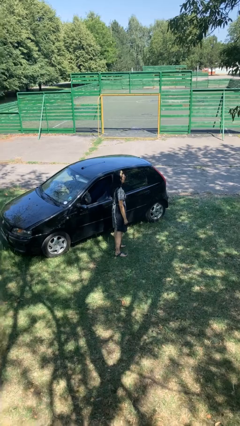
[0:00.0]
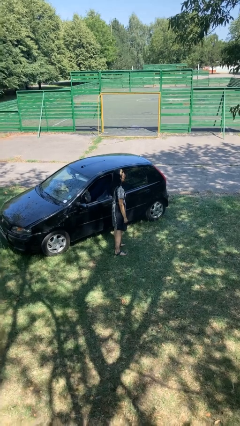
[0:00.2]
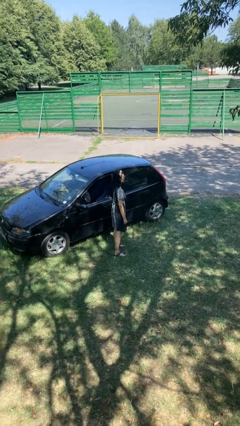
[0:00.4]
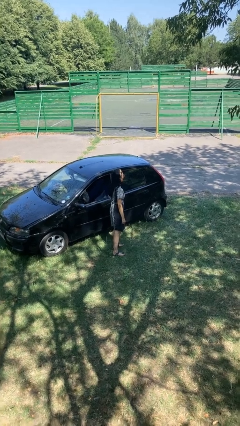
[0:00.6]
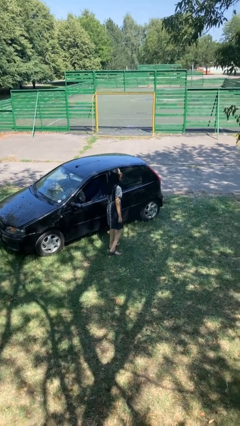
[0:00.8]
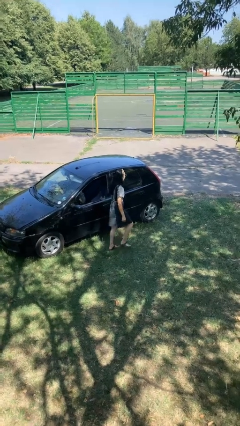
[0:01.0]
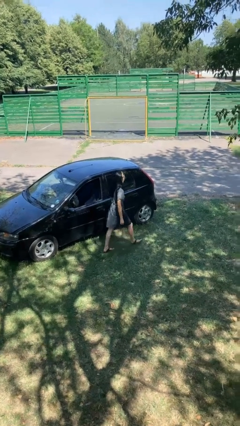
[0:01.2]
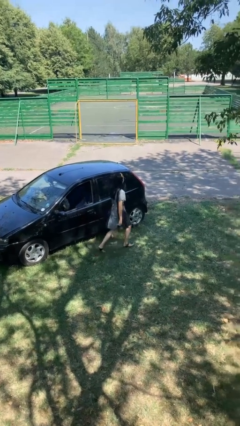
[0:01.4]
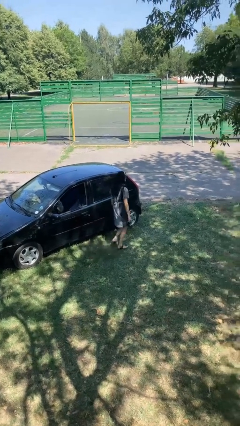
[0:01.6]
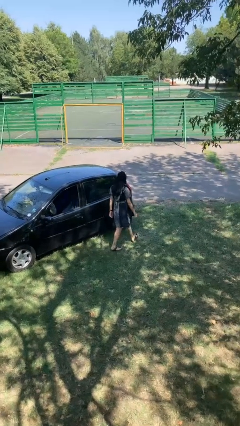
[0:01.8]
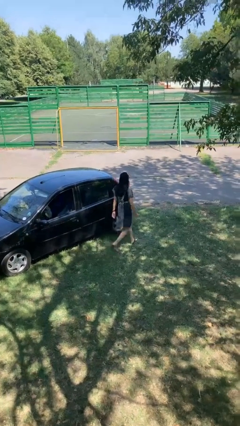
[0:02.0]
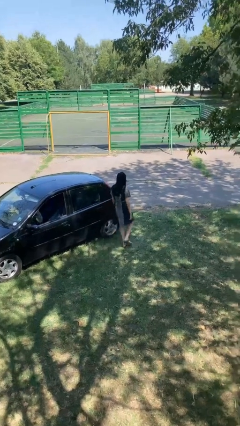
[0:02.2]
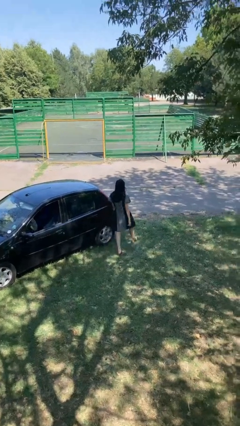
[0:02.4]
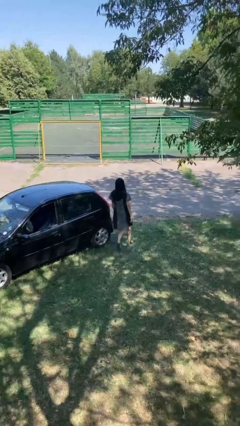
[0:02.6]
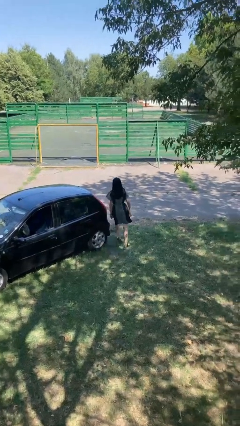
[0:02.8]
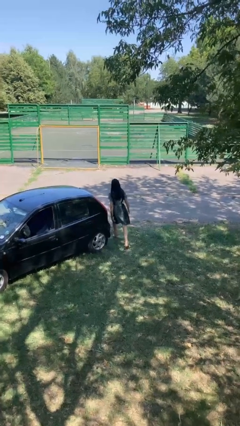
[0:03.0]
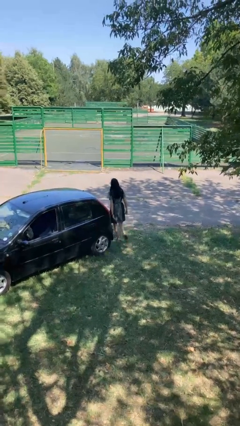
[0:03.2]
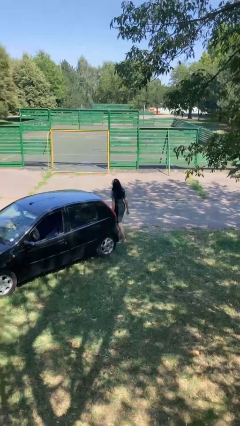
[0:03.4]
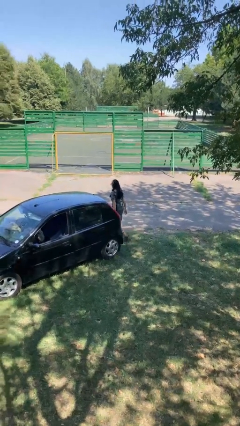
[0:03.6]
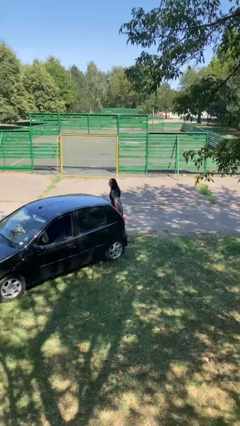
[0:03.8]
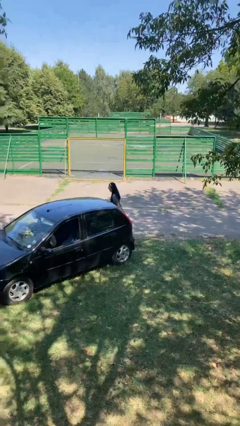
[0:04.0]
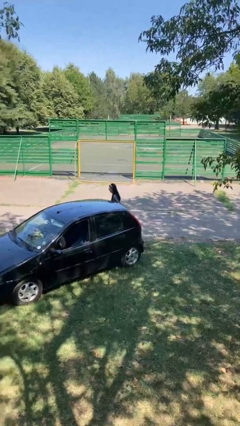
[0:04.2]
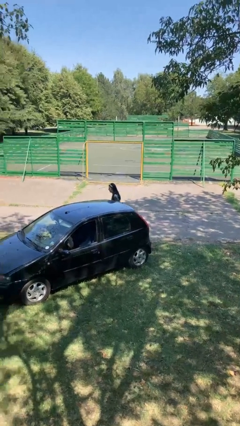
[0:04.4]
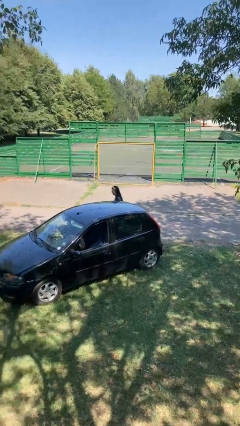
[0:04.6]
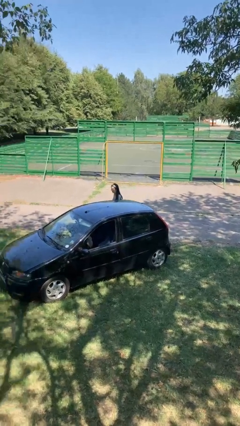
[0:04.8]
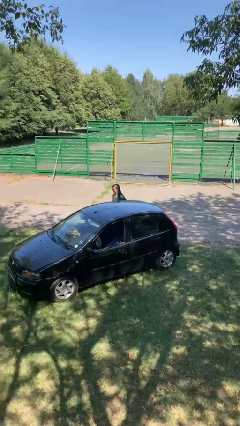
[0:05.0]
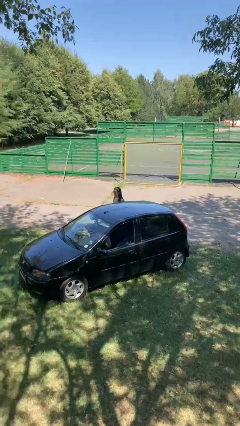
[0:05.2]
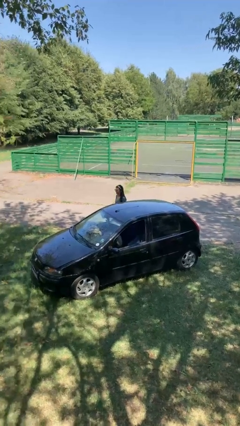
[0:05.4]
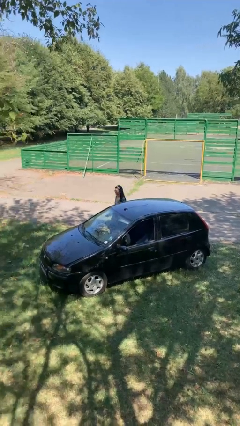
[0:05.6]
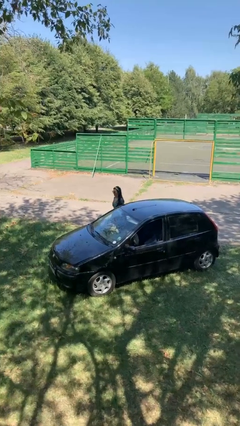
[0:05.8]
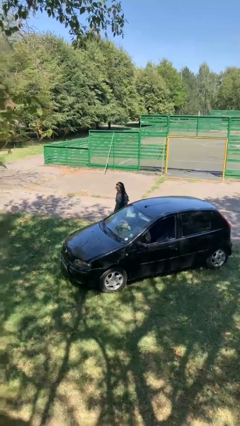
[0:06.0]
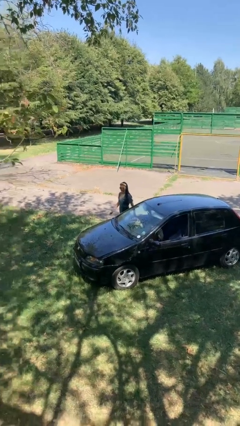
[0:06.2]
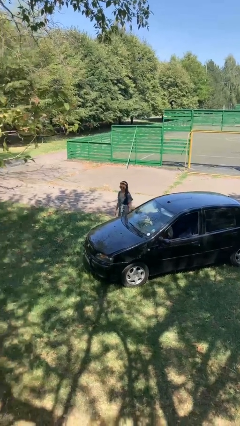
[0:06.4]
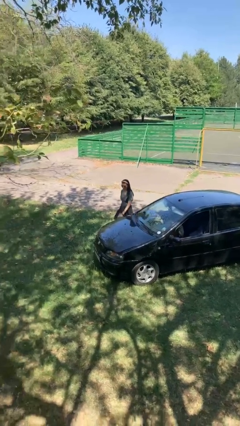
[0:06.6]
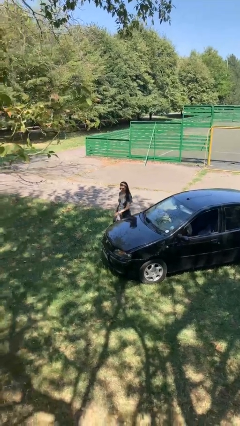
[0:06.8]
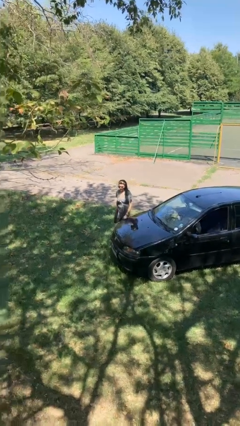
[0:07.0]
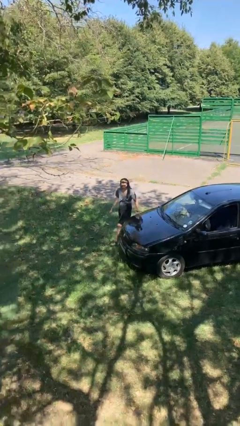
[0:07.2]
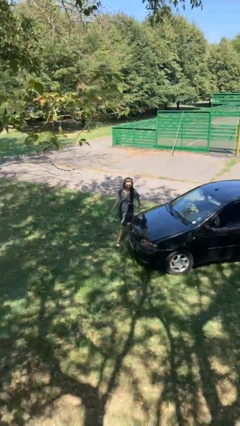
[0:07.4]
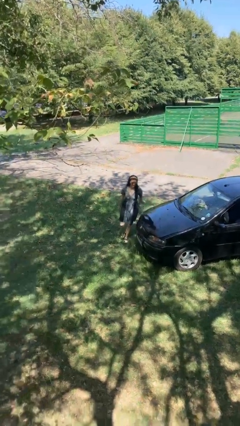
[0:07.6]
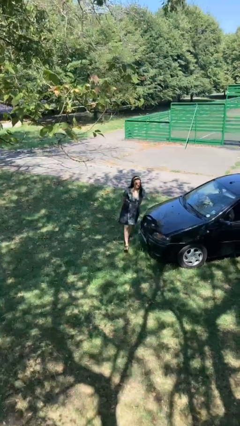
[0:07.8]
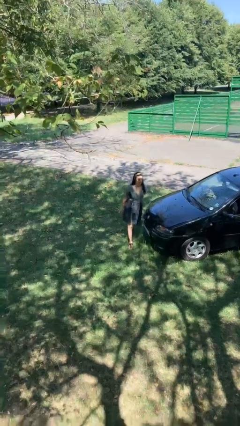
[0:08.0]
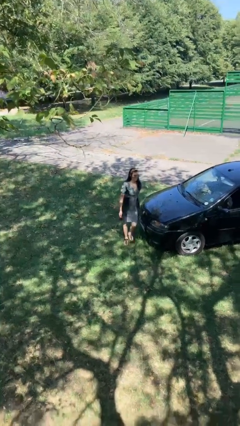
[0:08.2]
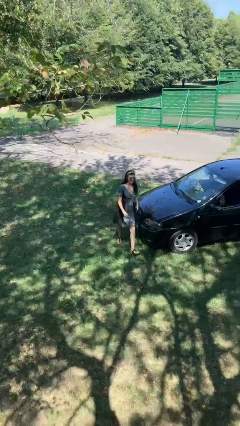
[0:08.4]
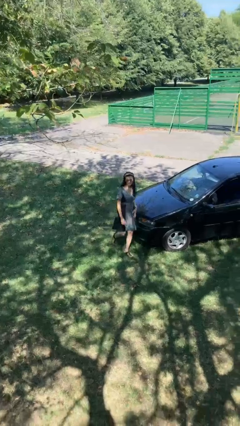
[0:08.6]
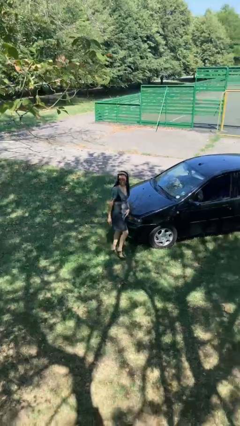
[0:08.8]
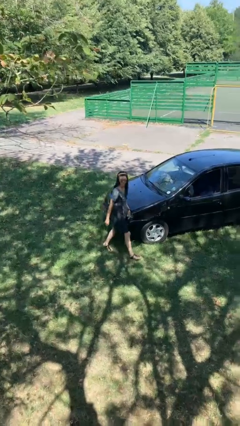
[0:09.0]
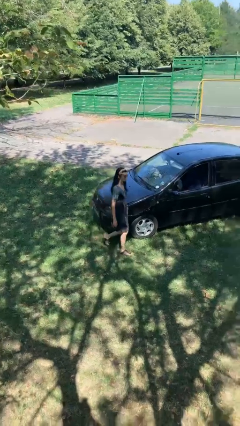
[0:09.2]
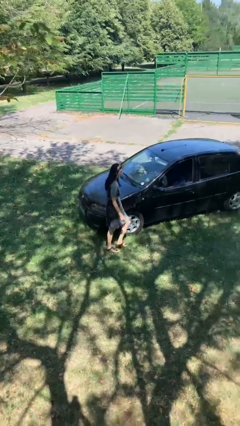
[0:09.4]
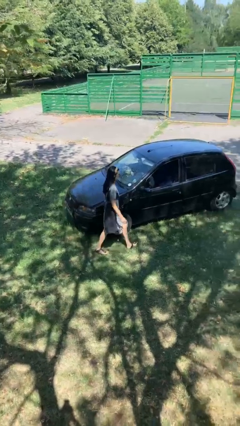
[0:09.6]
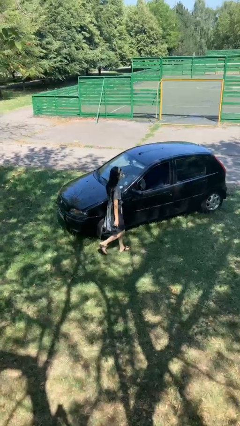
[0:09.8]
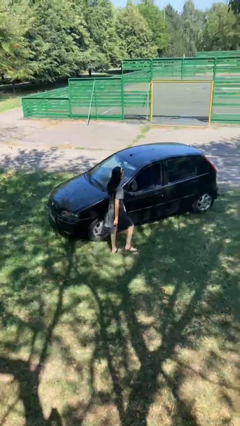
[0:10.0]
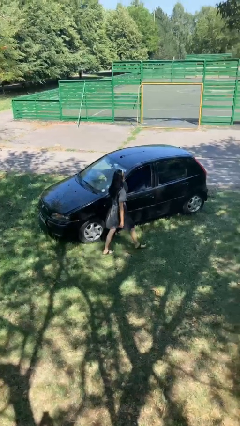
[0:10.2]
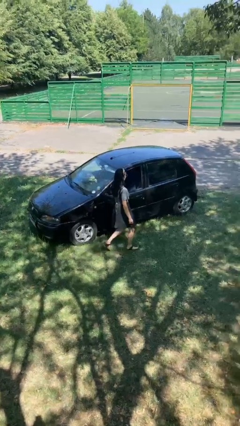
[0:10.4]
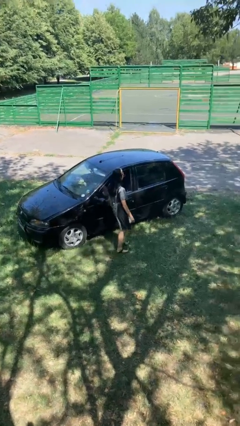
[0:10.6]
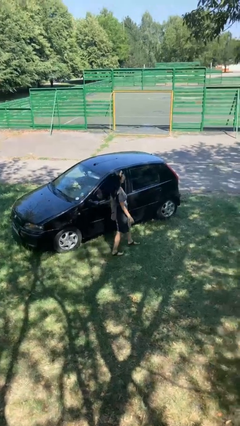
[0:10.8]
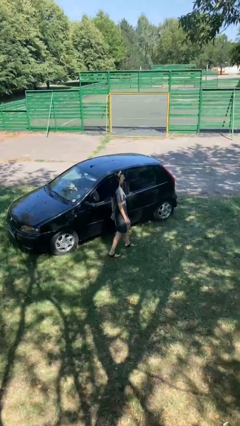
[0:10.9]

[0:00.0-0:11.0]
person walks around car

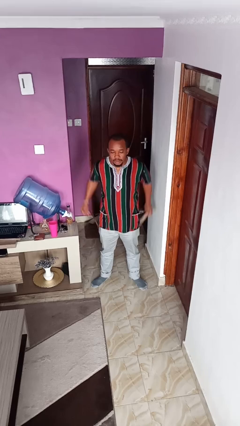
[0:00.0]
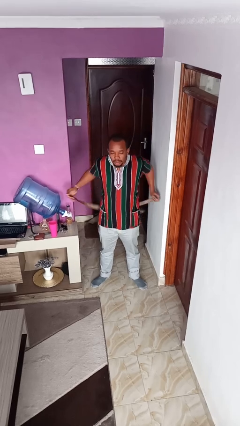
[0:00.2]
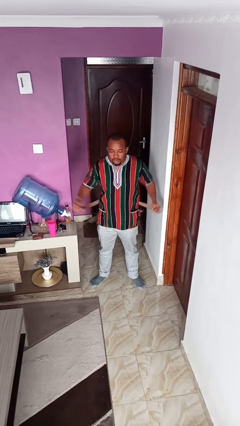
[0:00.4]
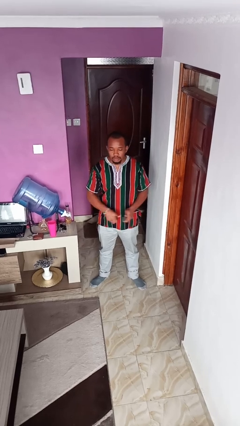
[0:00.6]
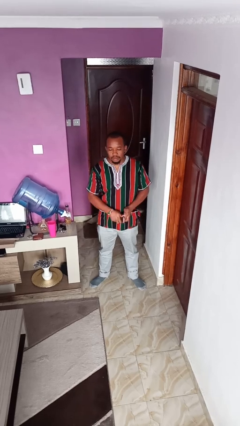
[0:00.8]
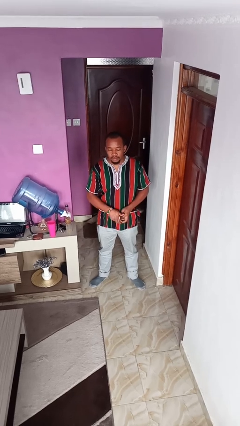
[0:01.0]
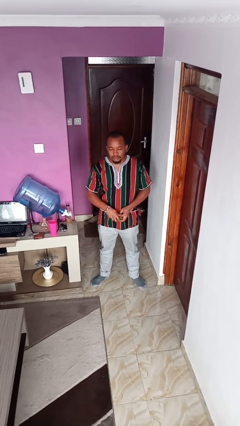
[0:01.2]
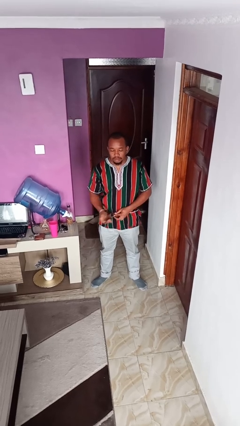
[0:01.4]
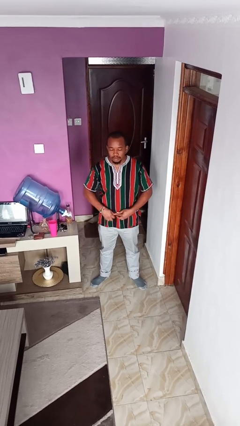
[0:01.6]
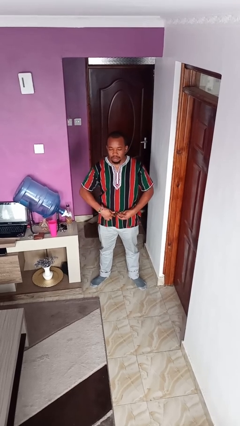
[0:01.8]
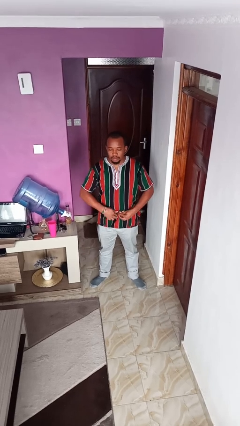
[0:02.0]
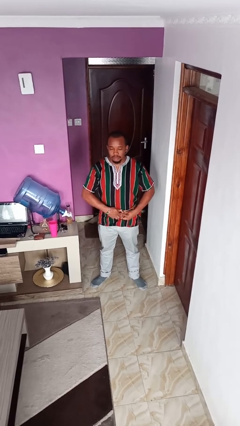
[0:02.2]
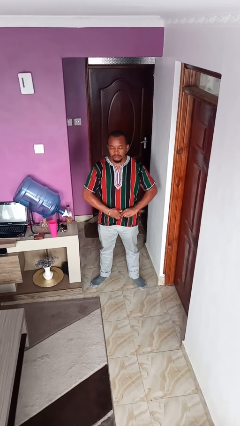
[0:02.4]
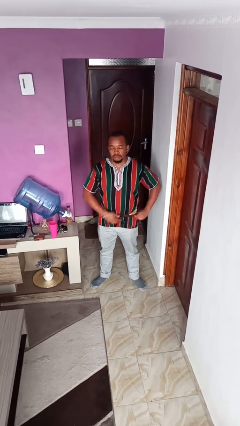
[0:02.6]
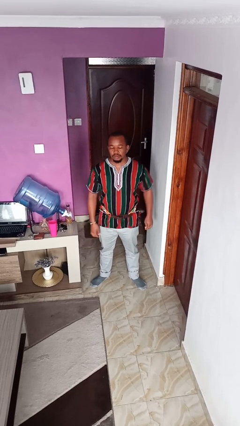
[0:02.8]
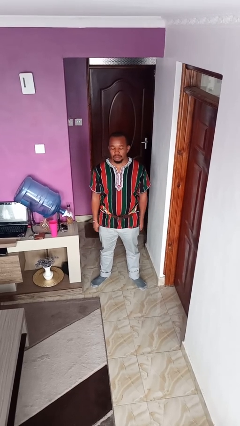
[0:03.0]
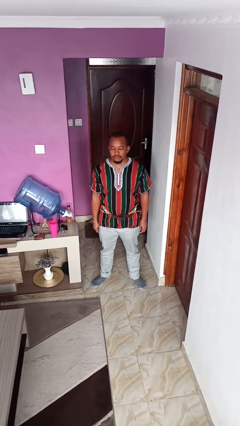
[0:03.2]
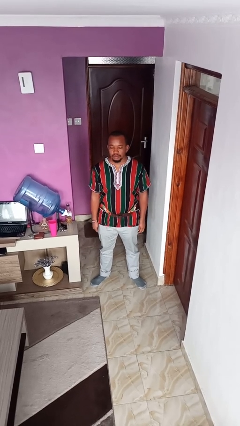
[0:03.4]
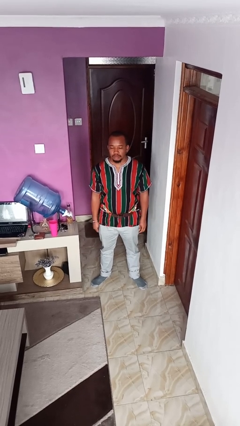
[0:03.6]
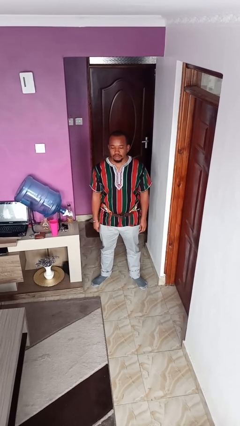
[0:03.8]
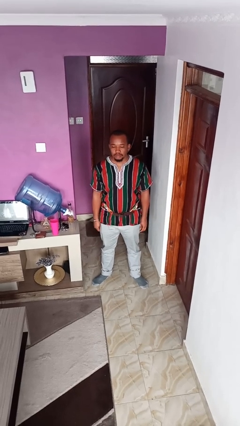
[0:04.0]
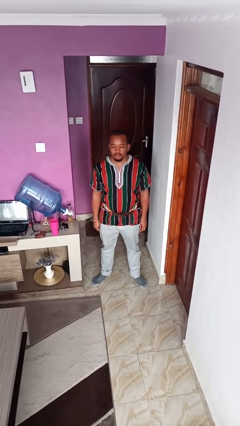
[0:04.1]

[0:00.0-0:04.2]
person puts on belt

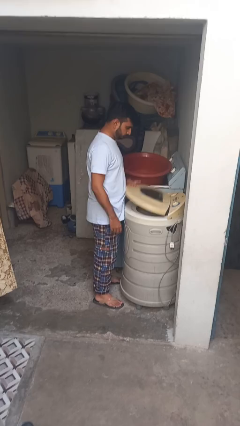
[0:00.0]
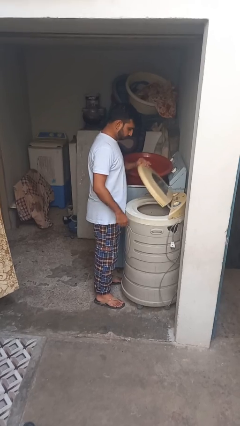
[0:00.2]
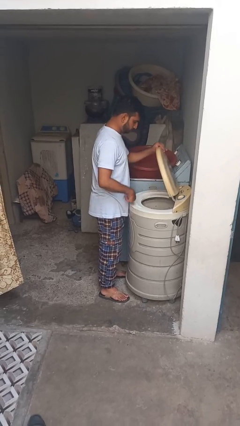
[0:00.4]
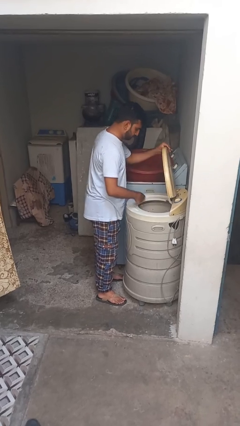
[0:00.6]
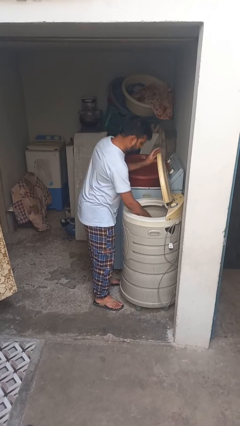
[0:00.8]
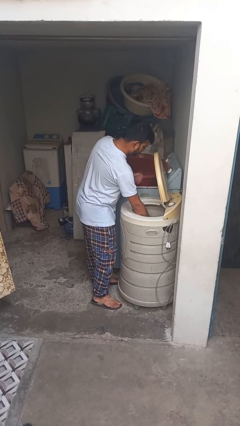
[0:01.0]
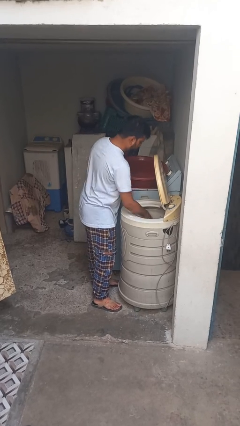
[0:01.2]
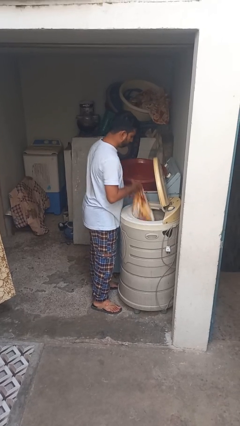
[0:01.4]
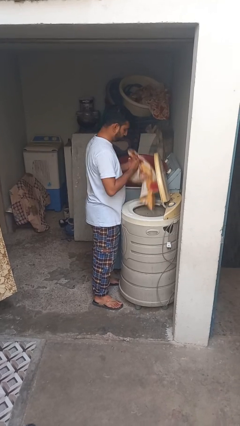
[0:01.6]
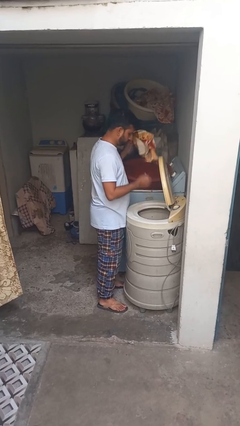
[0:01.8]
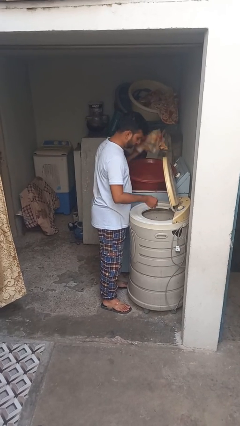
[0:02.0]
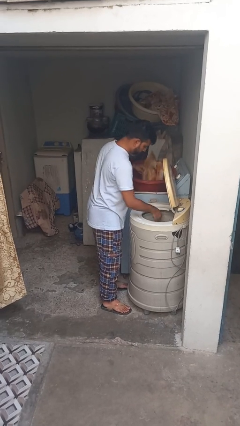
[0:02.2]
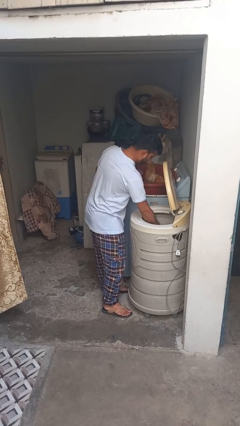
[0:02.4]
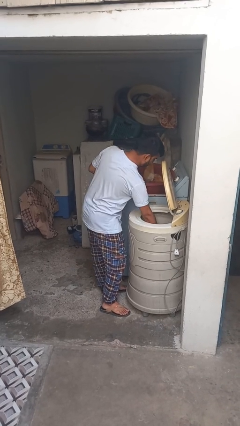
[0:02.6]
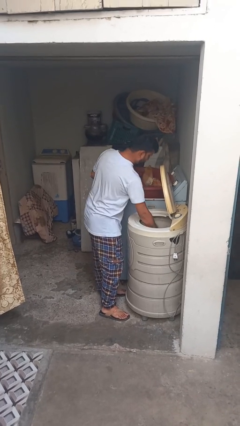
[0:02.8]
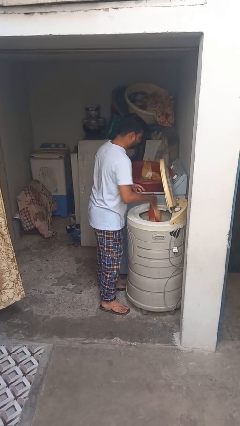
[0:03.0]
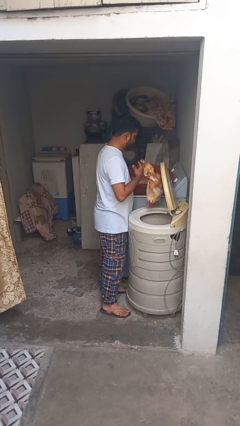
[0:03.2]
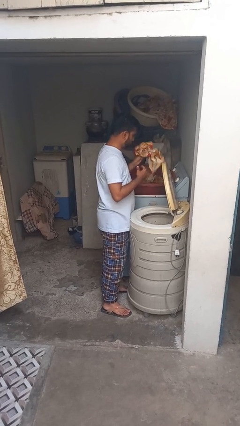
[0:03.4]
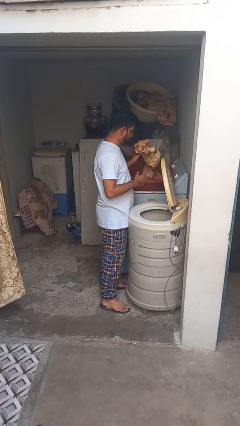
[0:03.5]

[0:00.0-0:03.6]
person unloads clotheswasher
